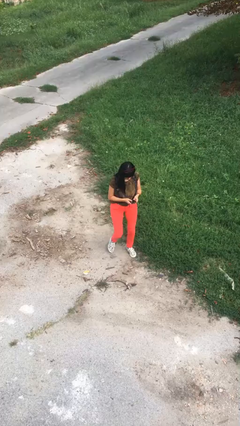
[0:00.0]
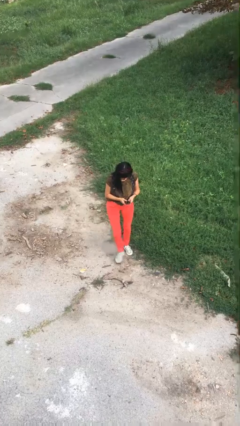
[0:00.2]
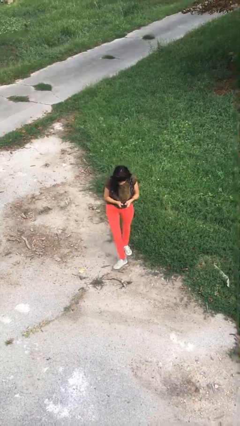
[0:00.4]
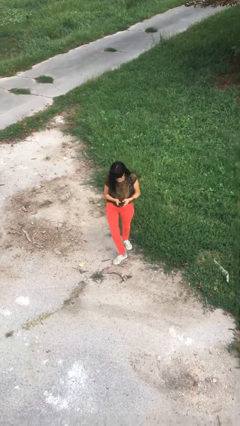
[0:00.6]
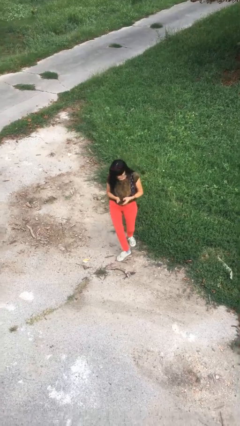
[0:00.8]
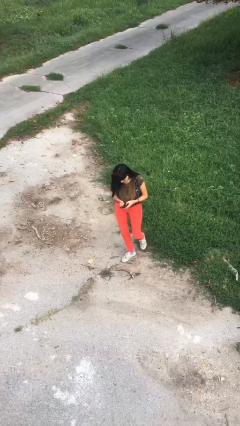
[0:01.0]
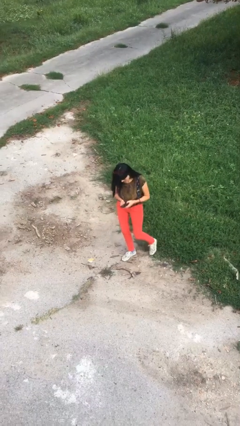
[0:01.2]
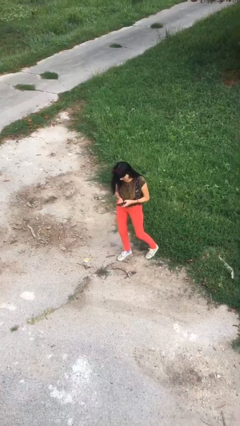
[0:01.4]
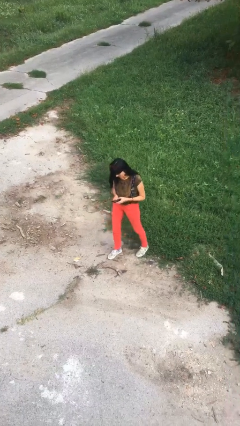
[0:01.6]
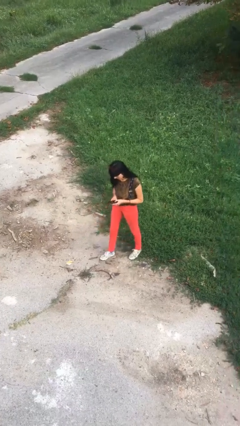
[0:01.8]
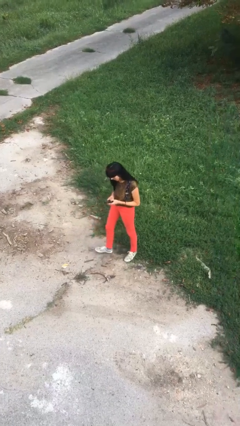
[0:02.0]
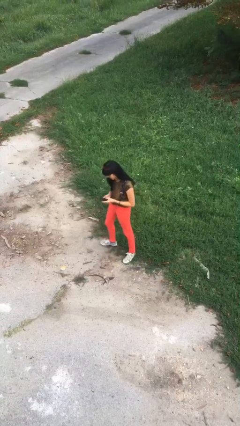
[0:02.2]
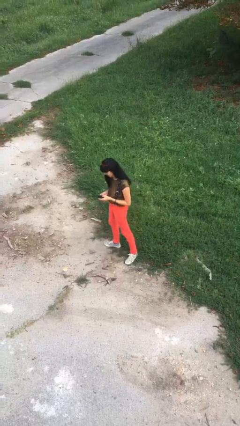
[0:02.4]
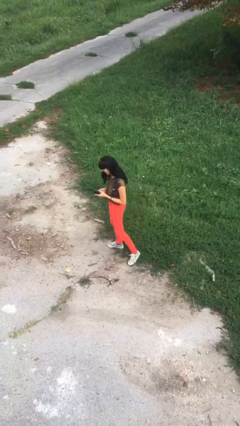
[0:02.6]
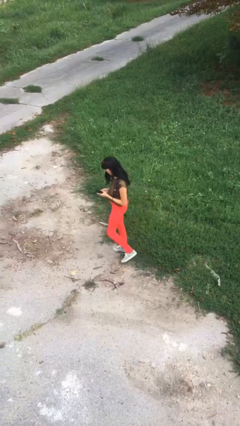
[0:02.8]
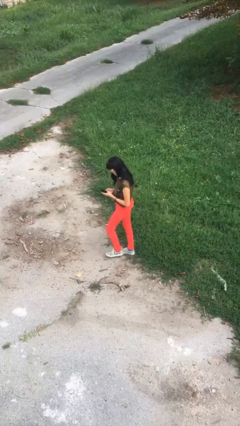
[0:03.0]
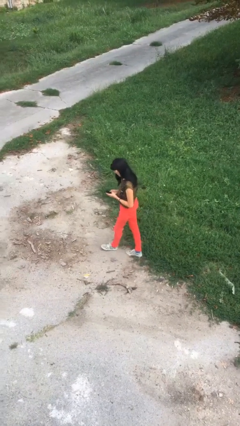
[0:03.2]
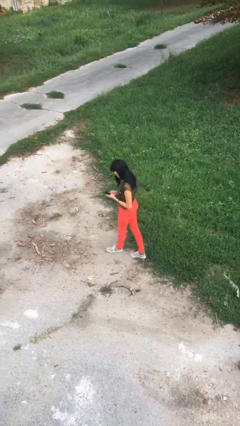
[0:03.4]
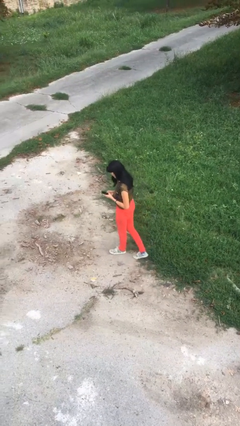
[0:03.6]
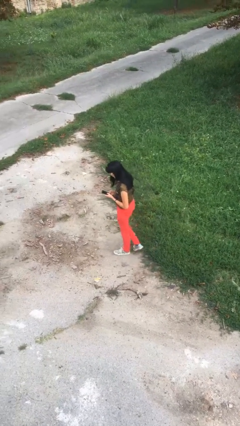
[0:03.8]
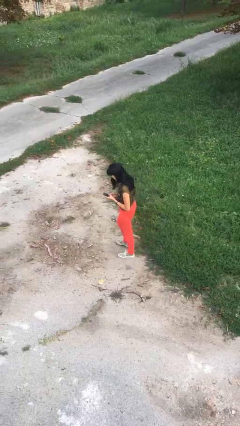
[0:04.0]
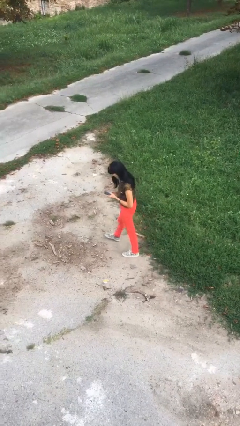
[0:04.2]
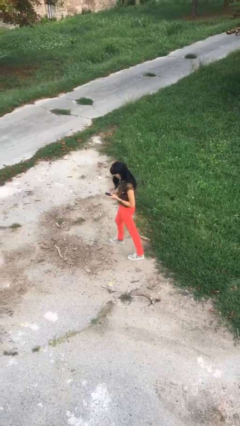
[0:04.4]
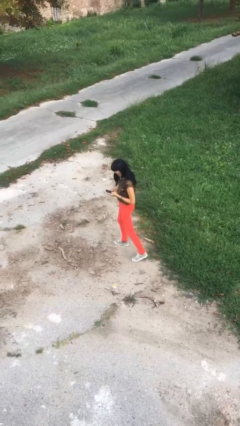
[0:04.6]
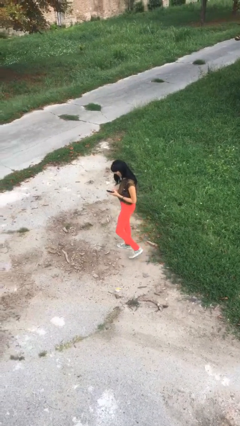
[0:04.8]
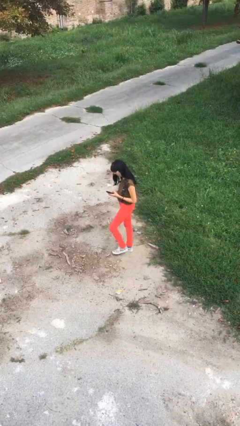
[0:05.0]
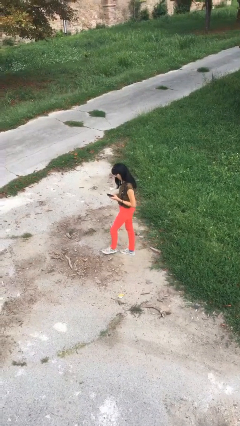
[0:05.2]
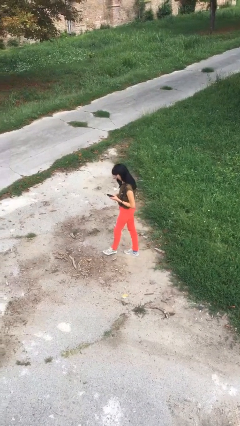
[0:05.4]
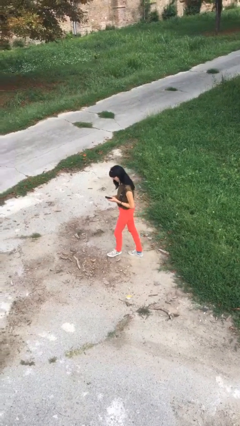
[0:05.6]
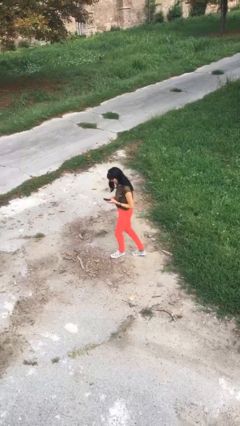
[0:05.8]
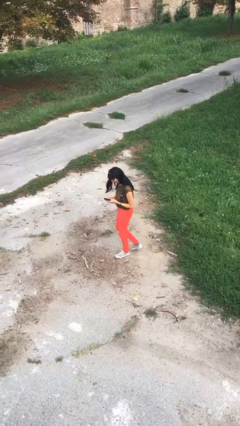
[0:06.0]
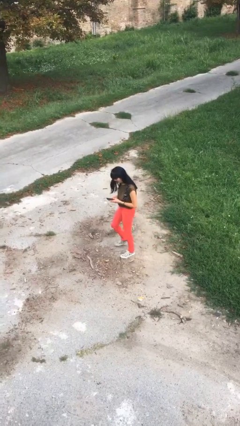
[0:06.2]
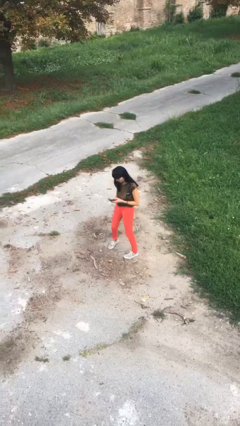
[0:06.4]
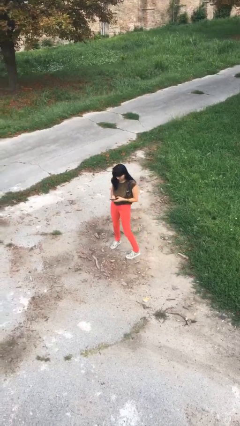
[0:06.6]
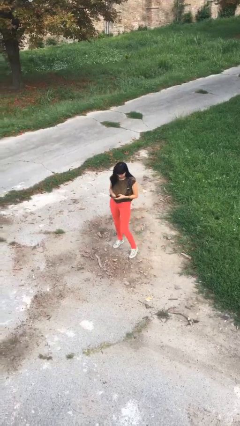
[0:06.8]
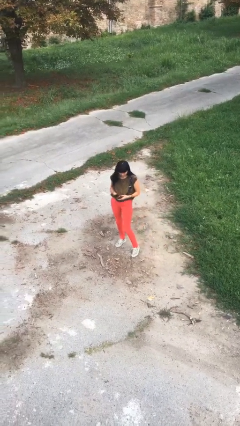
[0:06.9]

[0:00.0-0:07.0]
person texts on phone

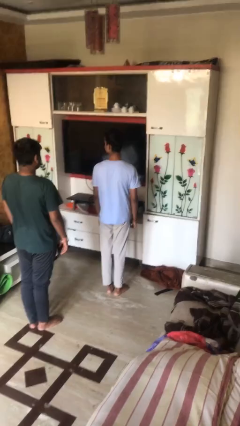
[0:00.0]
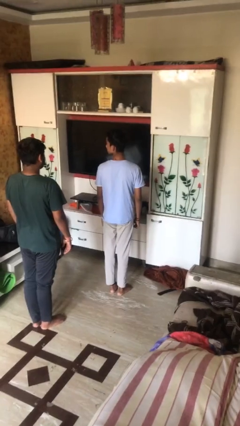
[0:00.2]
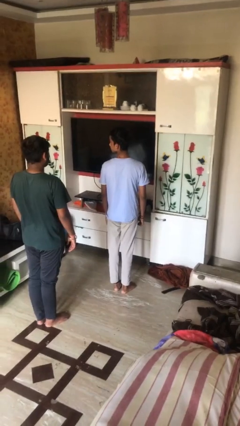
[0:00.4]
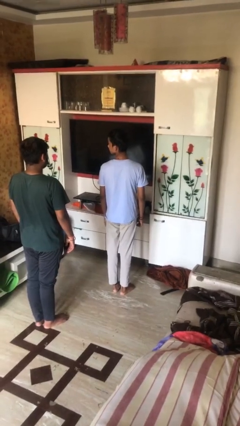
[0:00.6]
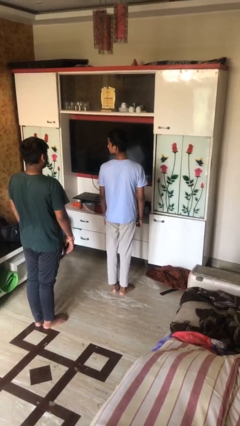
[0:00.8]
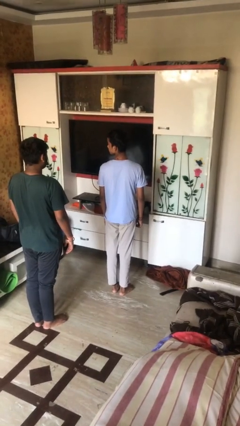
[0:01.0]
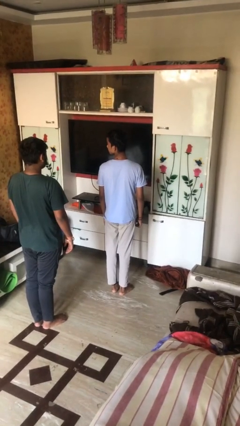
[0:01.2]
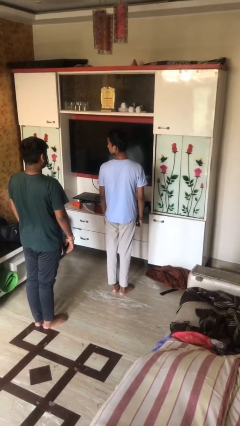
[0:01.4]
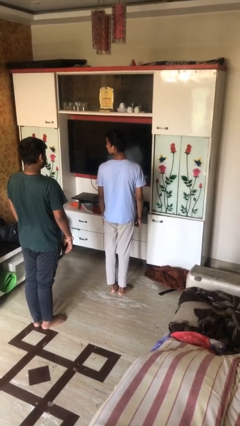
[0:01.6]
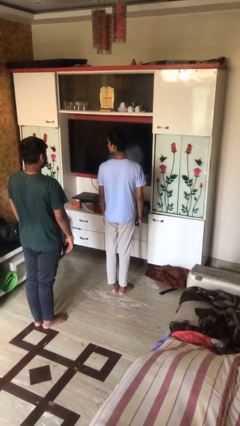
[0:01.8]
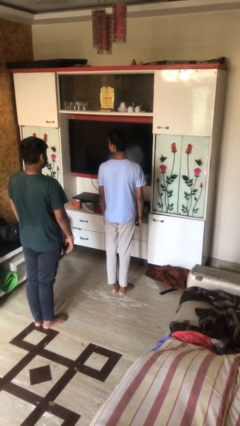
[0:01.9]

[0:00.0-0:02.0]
person looks over shoulder

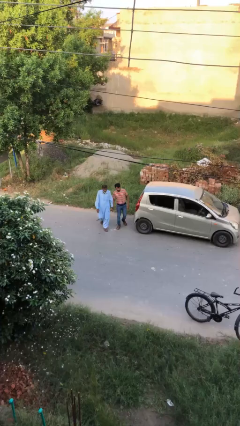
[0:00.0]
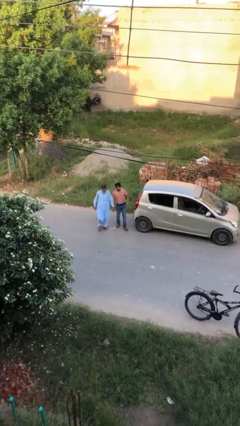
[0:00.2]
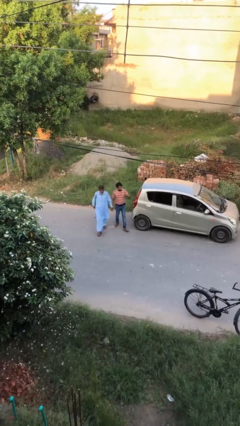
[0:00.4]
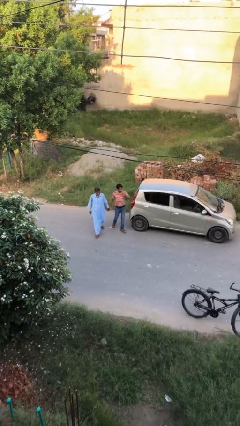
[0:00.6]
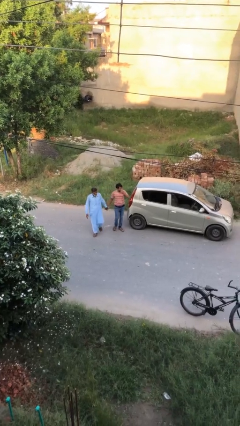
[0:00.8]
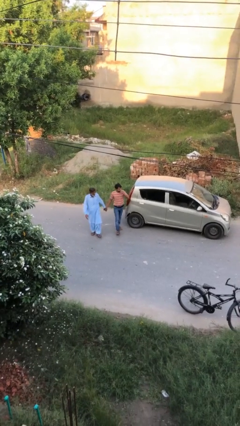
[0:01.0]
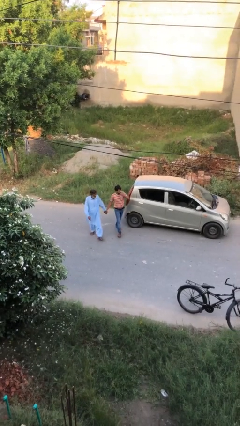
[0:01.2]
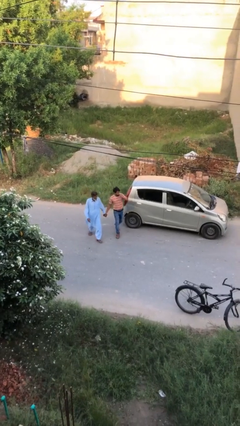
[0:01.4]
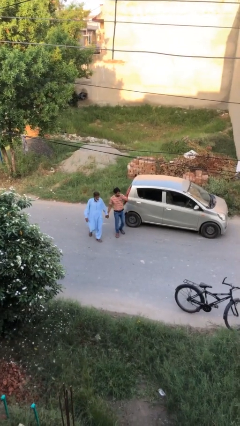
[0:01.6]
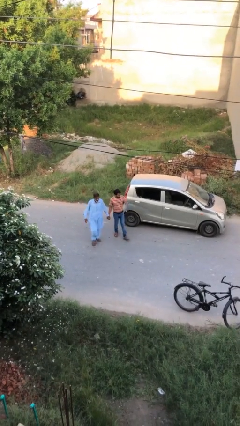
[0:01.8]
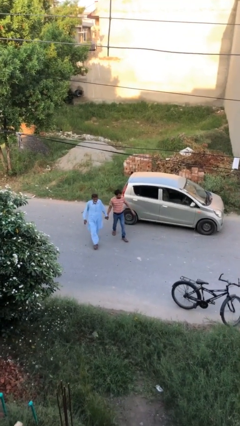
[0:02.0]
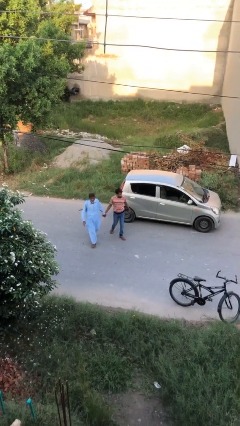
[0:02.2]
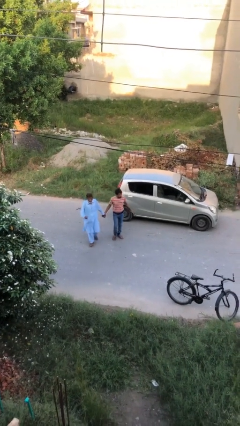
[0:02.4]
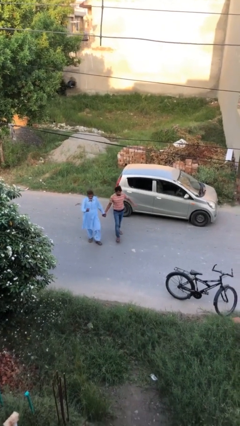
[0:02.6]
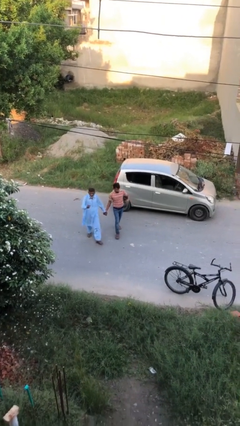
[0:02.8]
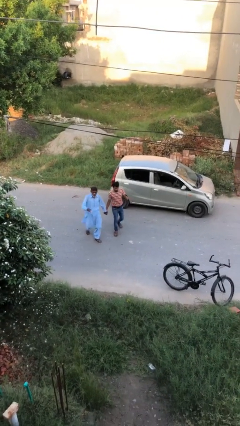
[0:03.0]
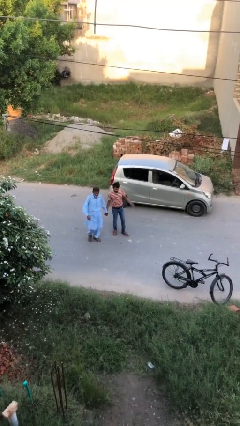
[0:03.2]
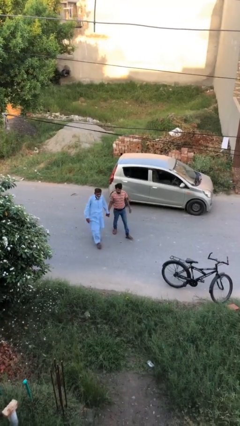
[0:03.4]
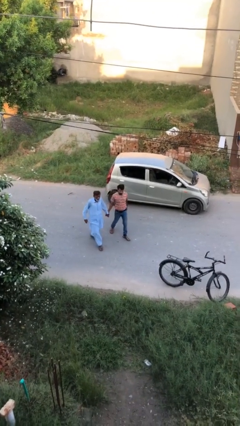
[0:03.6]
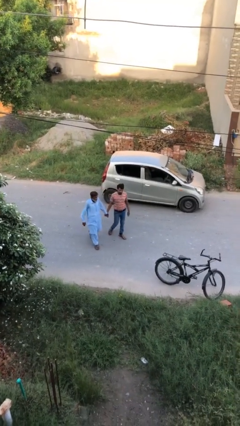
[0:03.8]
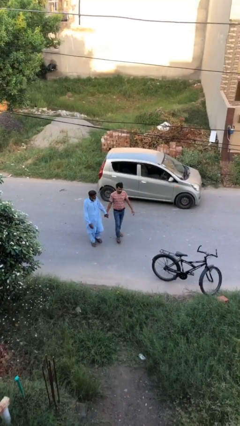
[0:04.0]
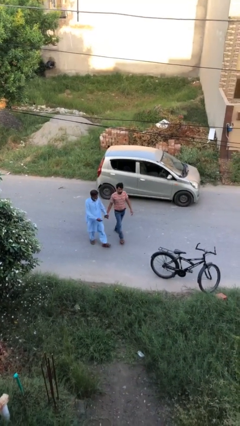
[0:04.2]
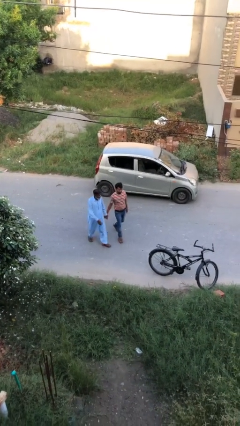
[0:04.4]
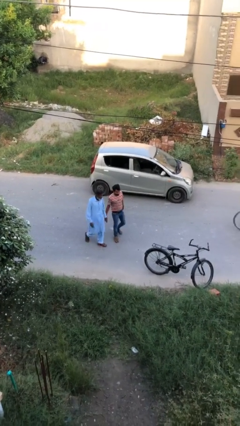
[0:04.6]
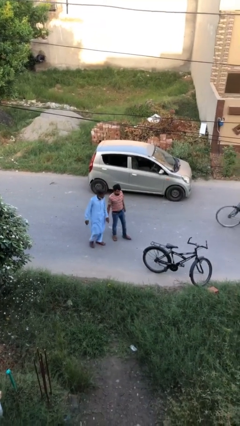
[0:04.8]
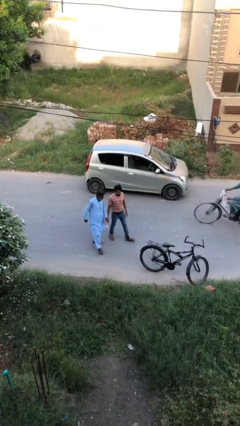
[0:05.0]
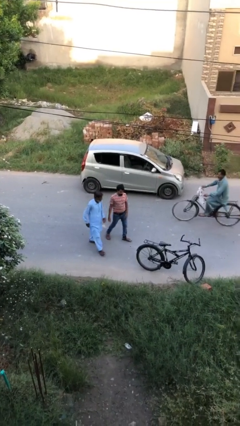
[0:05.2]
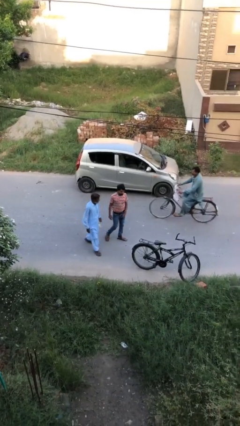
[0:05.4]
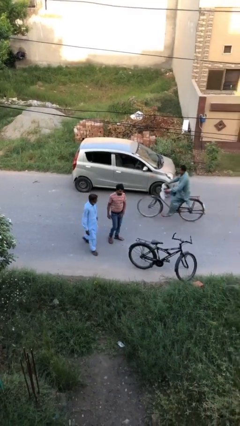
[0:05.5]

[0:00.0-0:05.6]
person holds hand

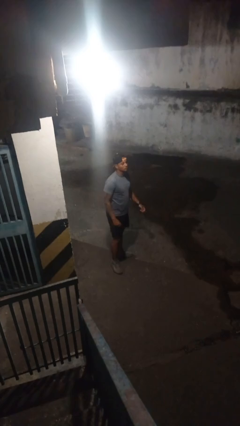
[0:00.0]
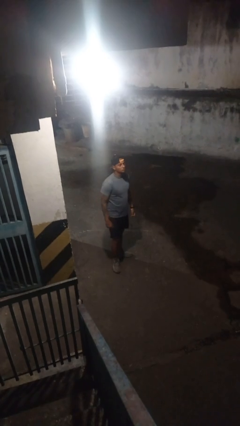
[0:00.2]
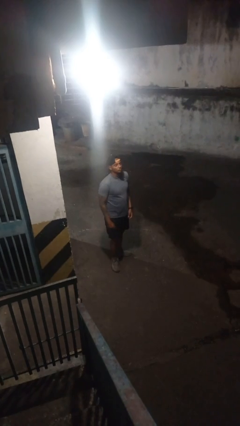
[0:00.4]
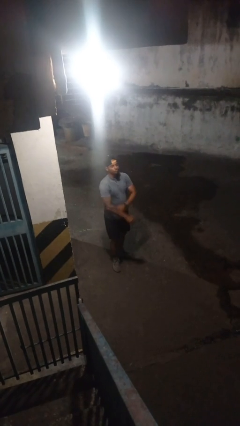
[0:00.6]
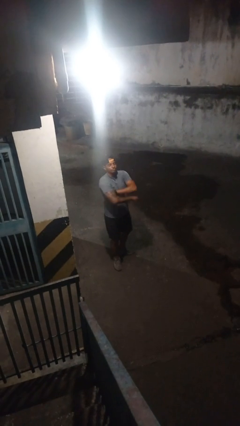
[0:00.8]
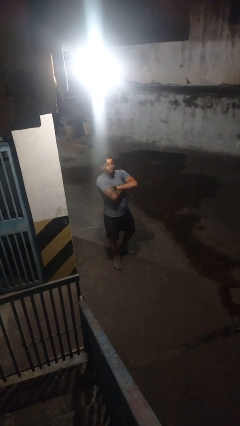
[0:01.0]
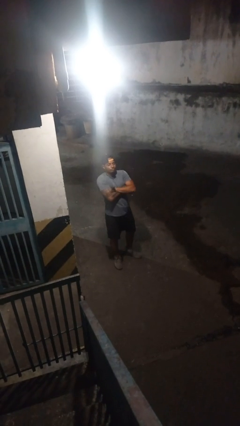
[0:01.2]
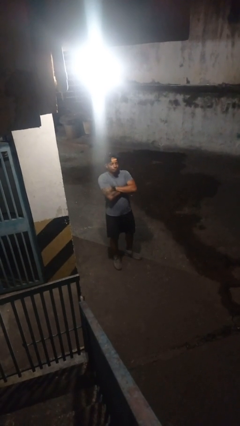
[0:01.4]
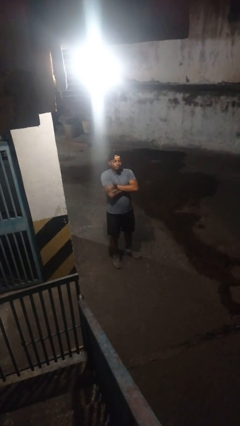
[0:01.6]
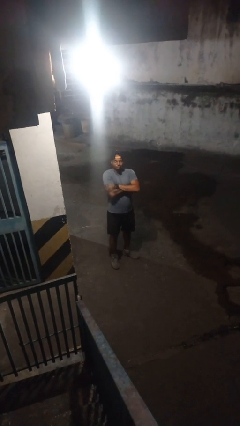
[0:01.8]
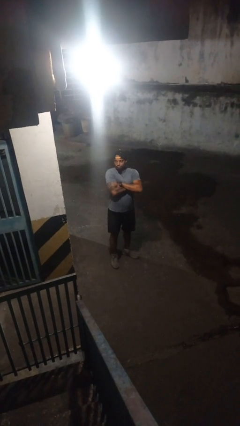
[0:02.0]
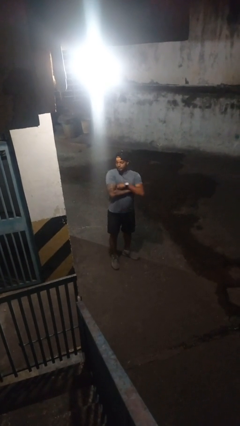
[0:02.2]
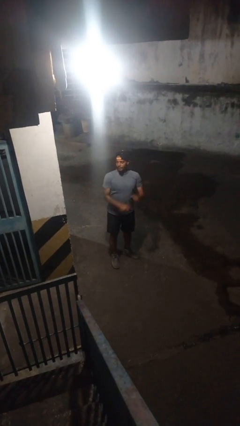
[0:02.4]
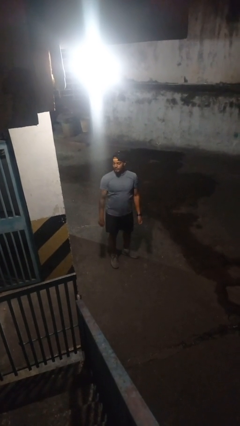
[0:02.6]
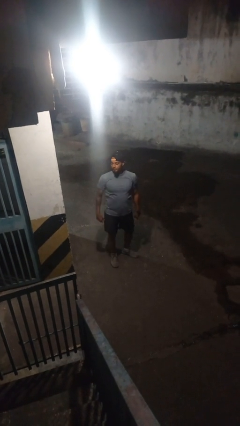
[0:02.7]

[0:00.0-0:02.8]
person crosses arms

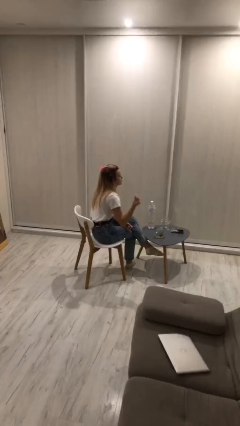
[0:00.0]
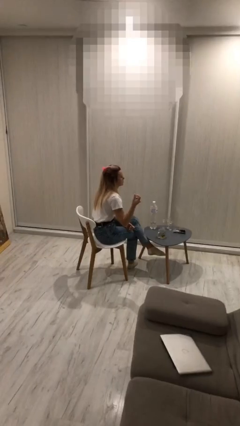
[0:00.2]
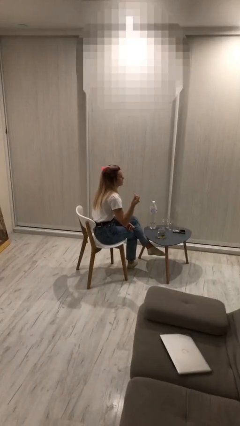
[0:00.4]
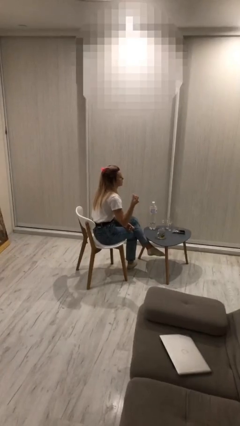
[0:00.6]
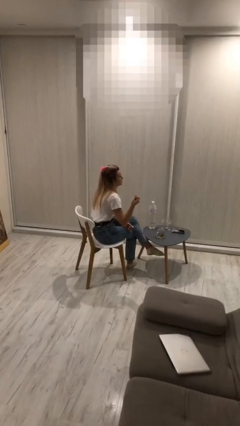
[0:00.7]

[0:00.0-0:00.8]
person snaps fingers
